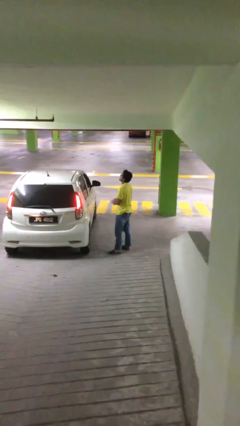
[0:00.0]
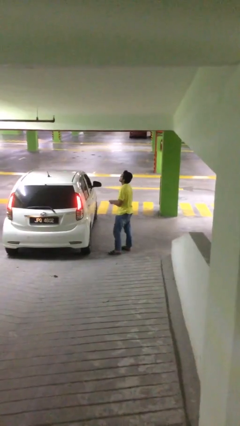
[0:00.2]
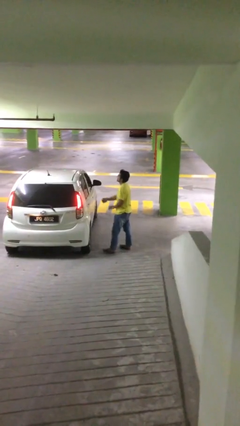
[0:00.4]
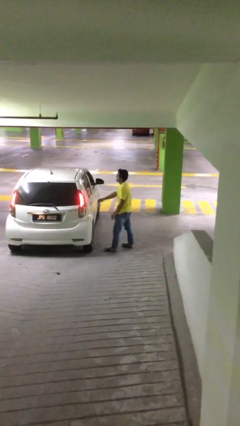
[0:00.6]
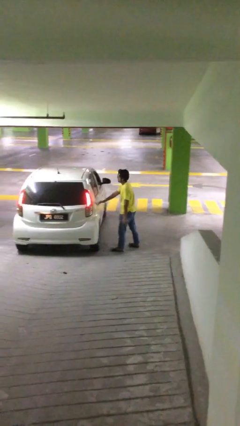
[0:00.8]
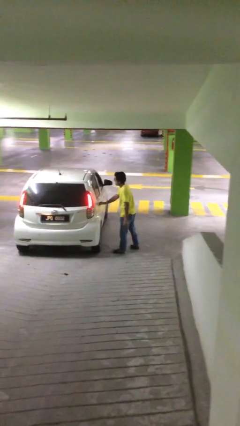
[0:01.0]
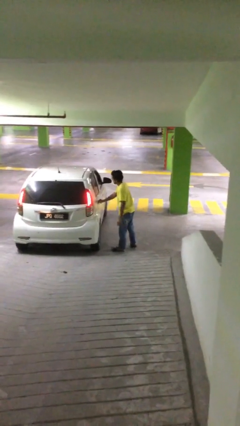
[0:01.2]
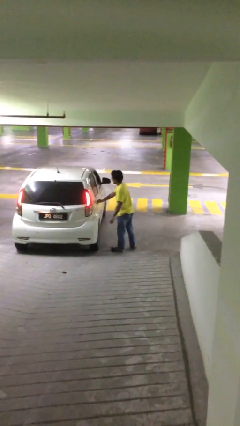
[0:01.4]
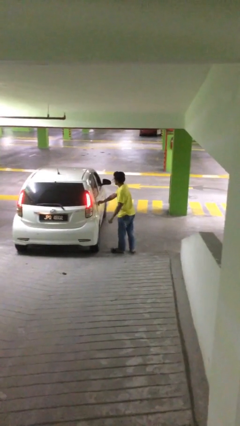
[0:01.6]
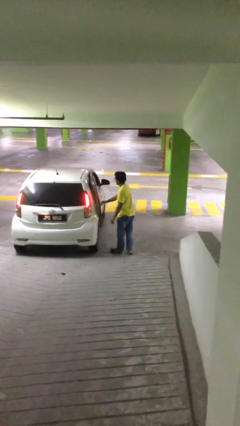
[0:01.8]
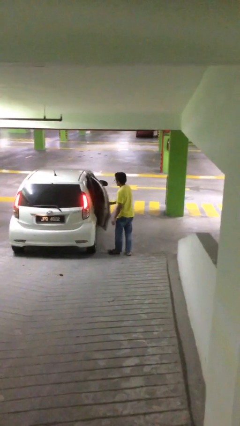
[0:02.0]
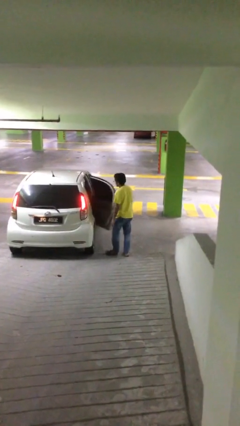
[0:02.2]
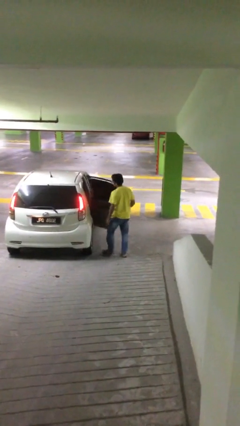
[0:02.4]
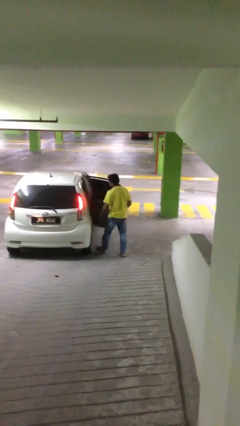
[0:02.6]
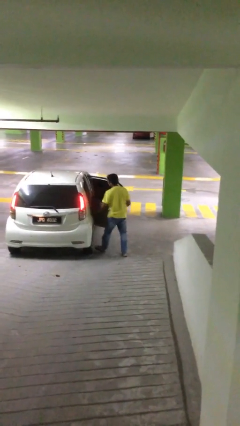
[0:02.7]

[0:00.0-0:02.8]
person opens car door

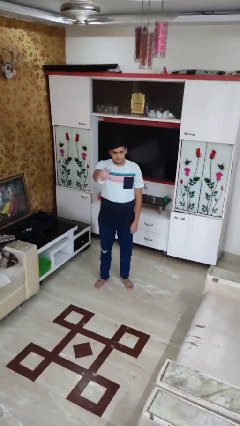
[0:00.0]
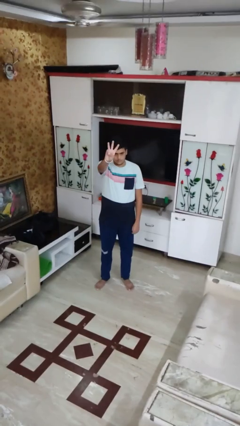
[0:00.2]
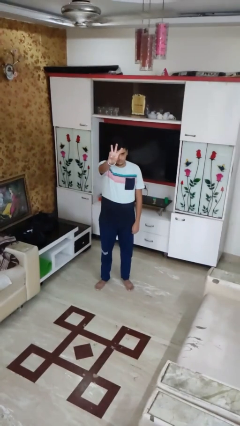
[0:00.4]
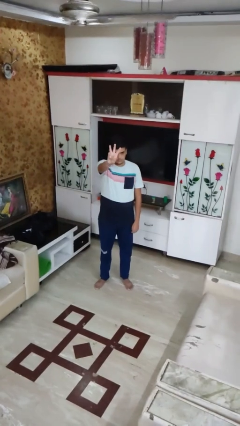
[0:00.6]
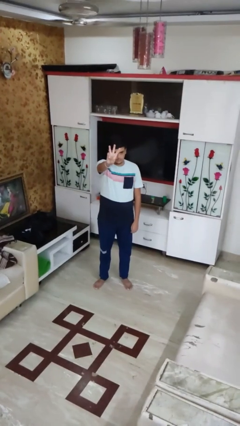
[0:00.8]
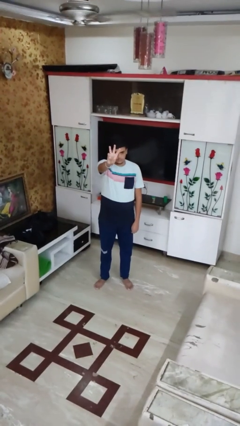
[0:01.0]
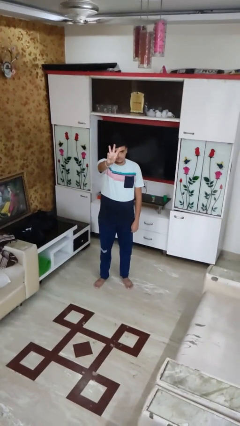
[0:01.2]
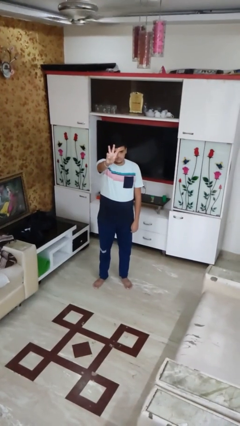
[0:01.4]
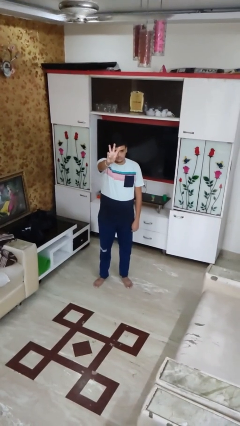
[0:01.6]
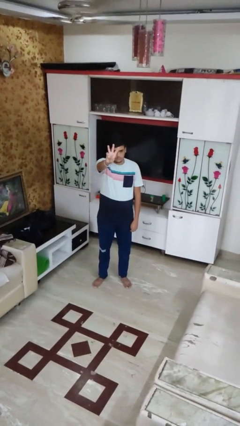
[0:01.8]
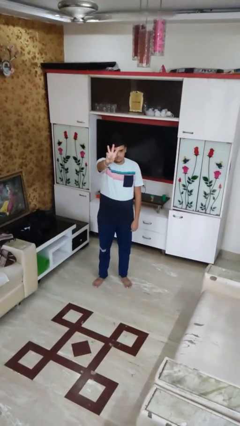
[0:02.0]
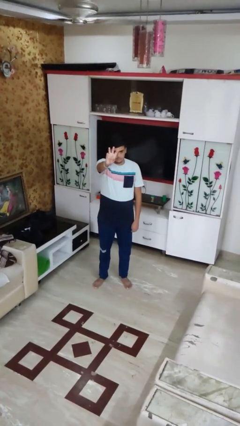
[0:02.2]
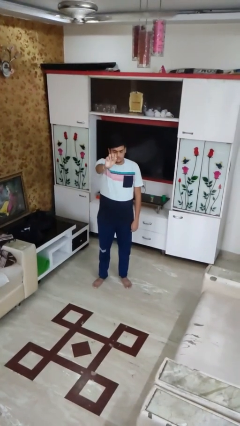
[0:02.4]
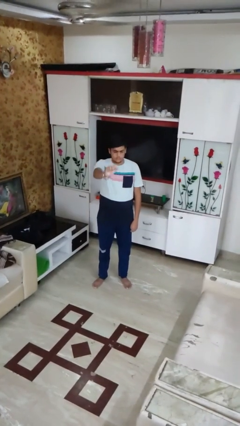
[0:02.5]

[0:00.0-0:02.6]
person gestures number three

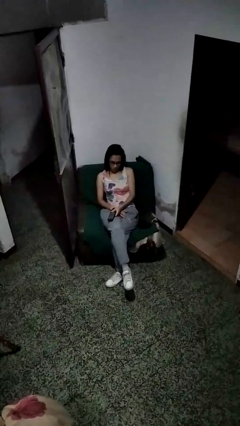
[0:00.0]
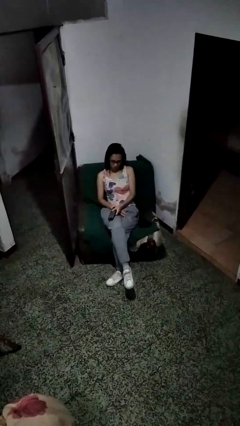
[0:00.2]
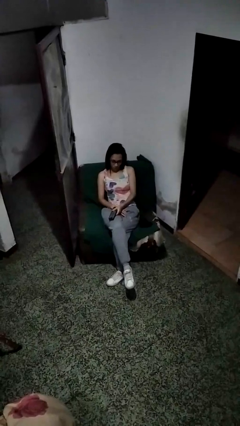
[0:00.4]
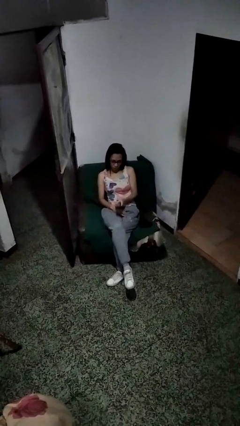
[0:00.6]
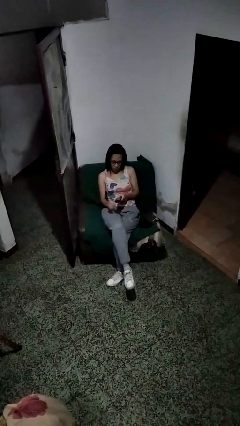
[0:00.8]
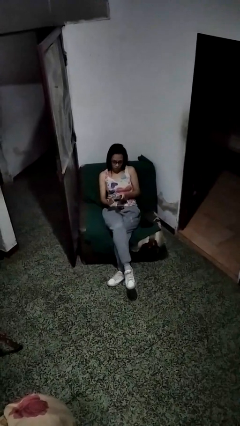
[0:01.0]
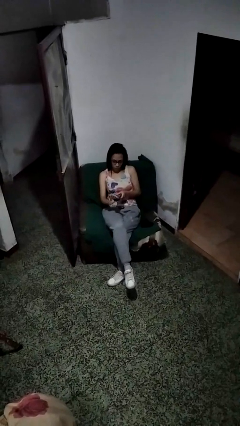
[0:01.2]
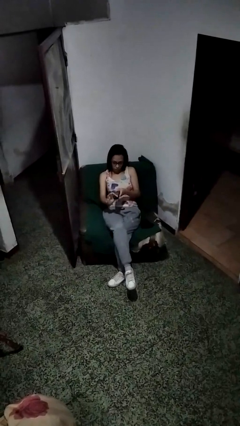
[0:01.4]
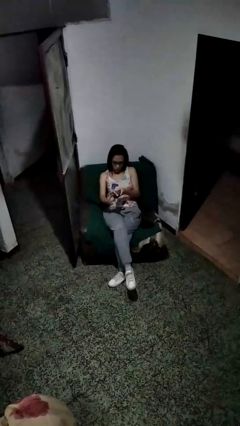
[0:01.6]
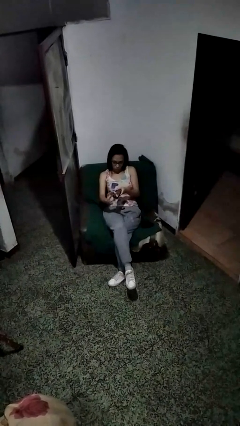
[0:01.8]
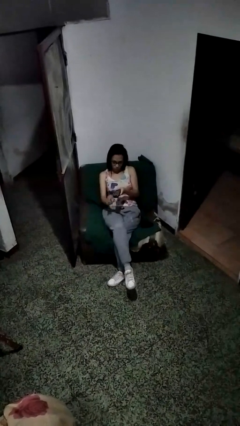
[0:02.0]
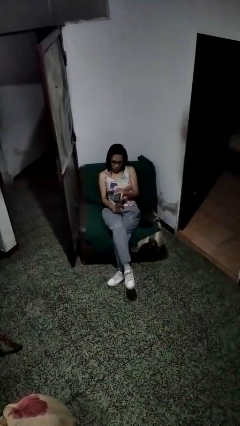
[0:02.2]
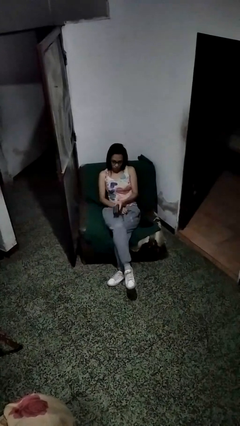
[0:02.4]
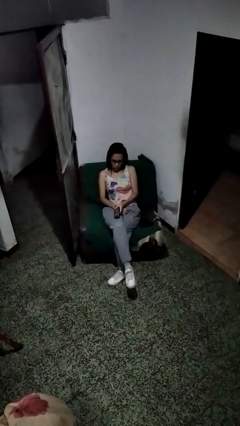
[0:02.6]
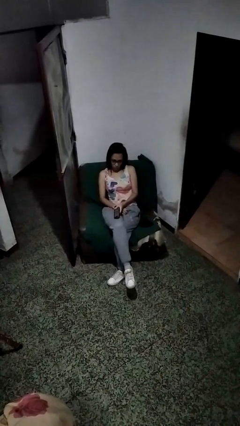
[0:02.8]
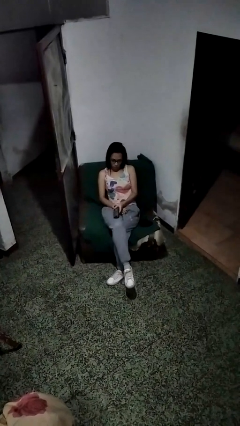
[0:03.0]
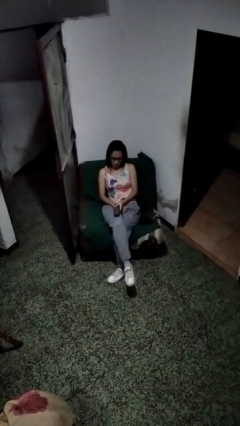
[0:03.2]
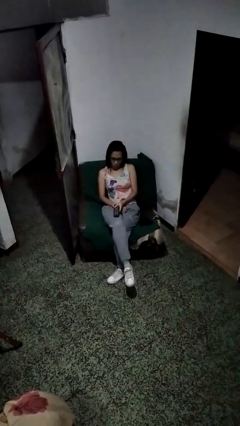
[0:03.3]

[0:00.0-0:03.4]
person uses television remote

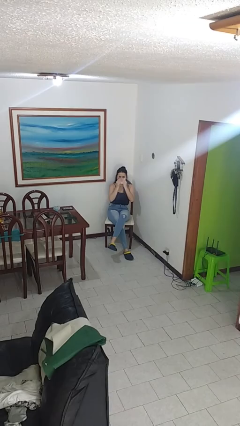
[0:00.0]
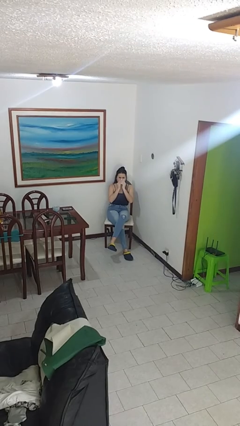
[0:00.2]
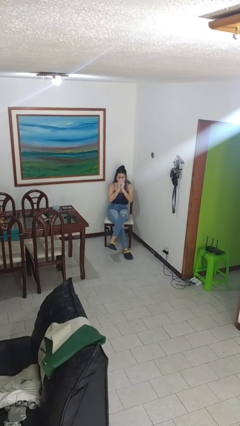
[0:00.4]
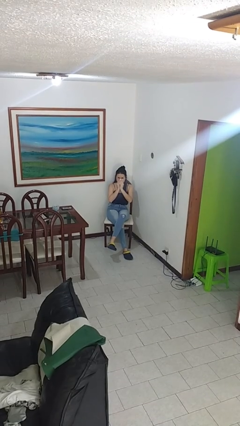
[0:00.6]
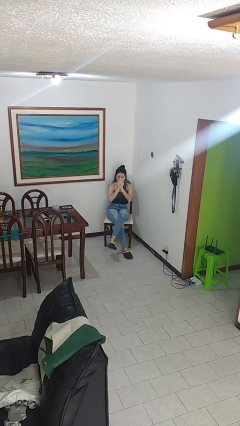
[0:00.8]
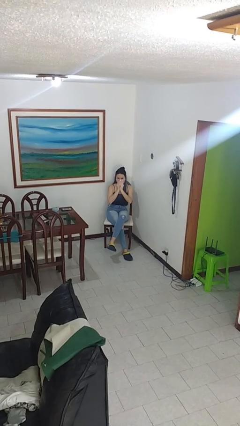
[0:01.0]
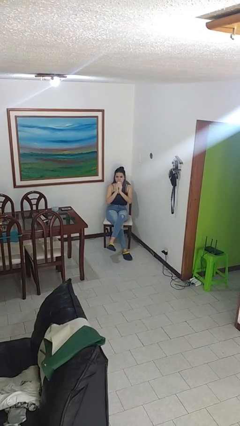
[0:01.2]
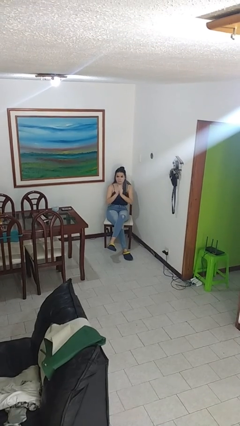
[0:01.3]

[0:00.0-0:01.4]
person blows nose

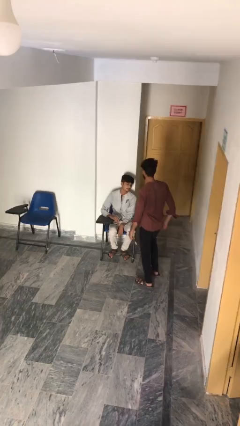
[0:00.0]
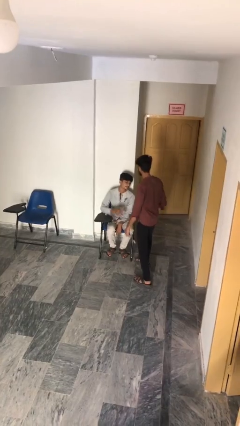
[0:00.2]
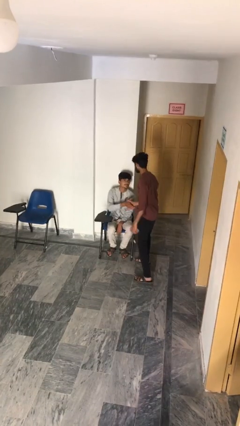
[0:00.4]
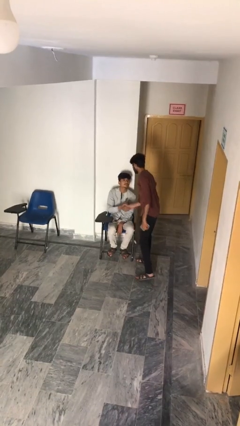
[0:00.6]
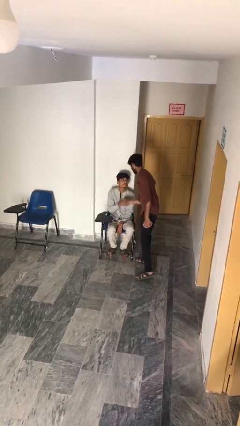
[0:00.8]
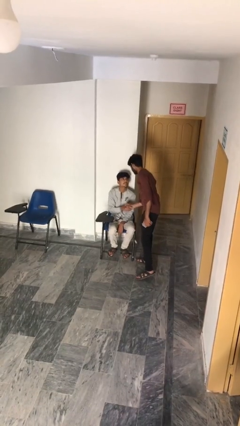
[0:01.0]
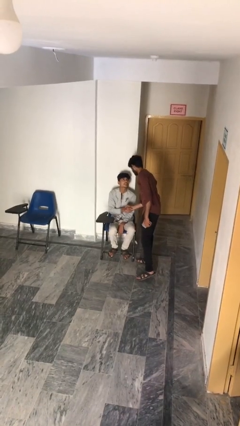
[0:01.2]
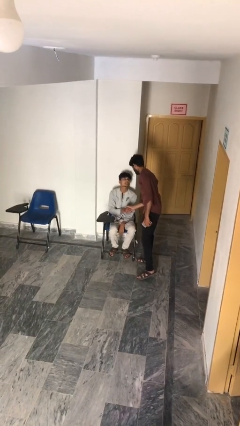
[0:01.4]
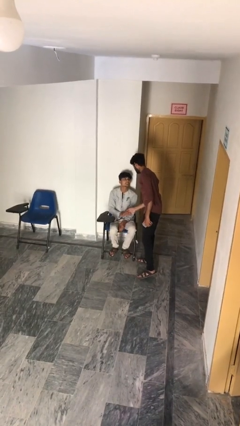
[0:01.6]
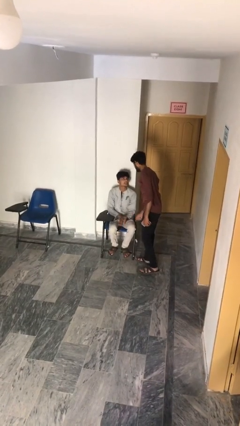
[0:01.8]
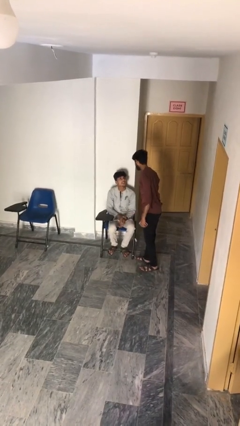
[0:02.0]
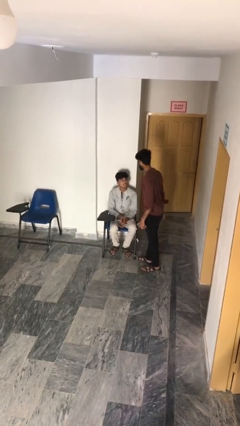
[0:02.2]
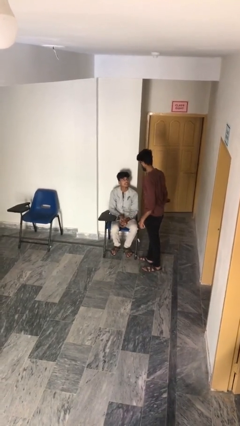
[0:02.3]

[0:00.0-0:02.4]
person shakes hand

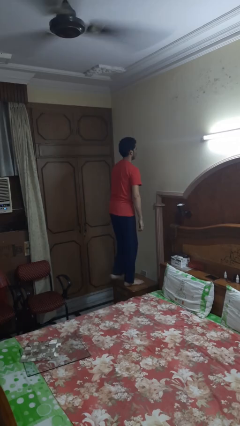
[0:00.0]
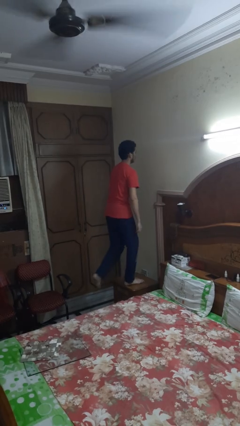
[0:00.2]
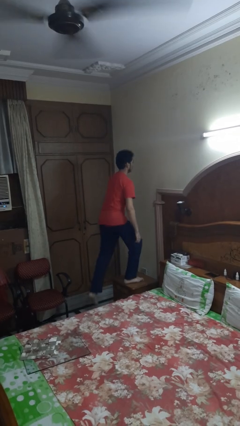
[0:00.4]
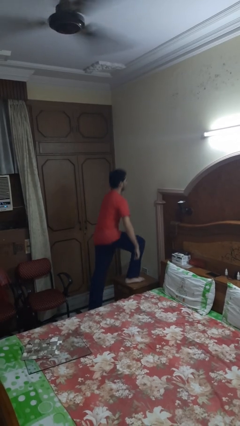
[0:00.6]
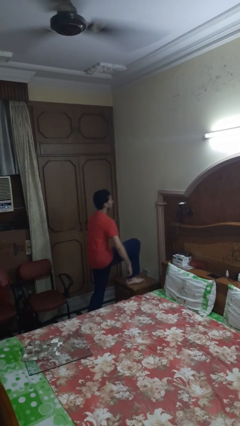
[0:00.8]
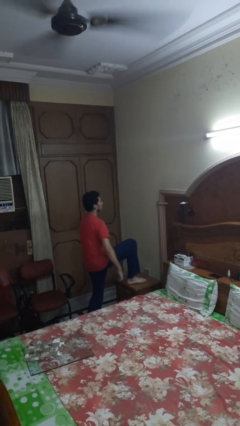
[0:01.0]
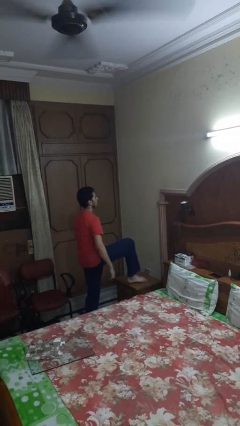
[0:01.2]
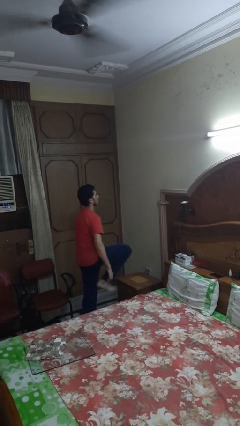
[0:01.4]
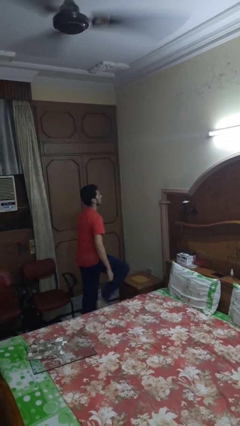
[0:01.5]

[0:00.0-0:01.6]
person climbs off table

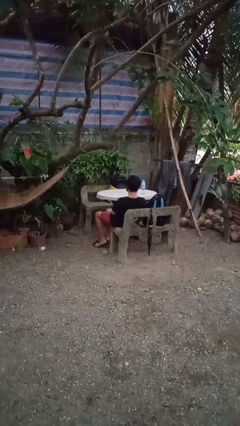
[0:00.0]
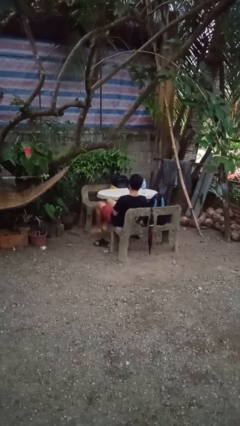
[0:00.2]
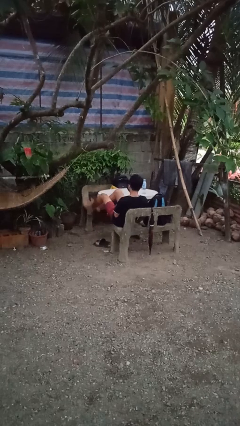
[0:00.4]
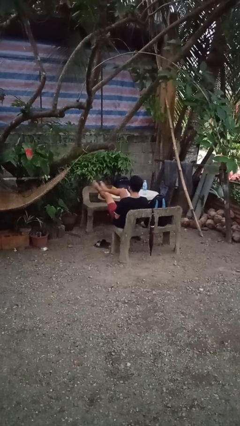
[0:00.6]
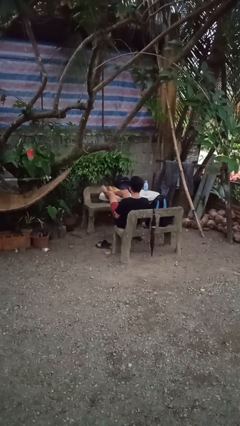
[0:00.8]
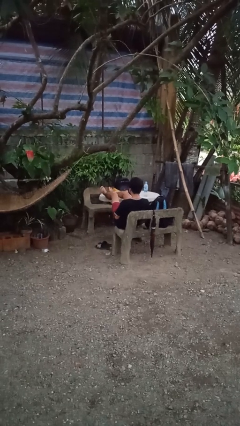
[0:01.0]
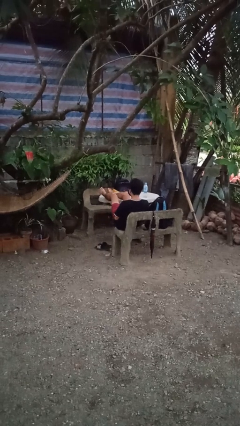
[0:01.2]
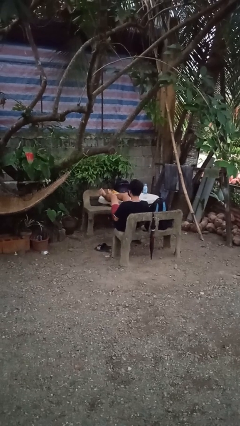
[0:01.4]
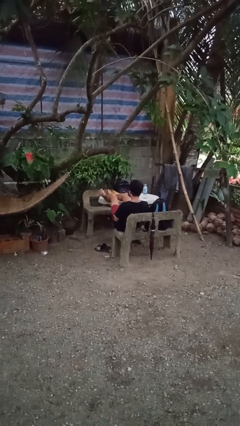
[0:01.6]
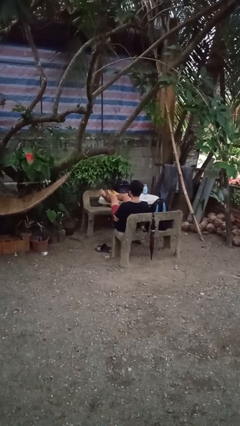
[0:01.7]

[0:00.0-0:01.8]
person puts feet up

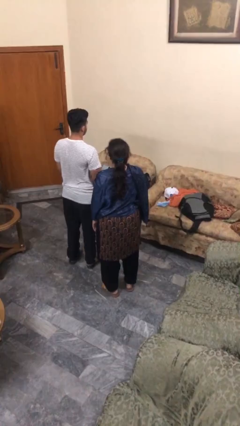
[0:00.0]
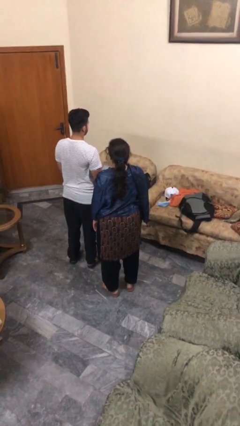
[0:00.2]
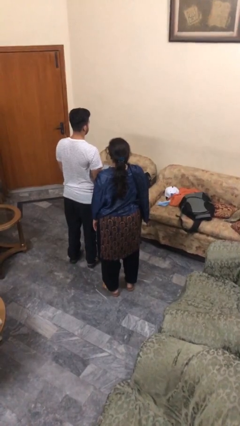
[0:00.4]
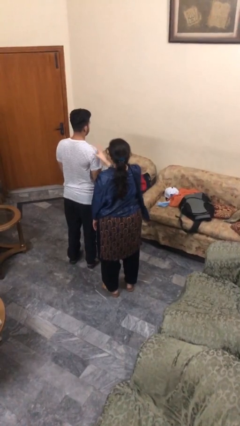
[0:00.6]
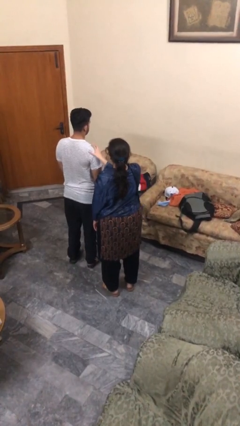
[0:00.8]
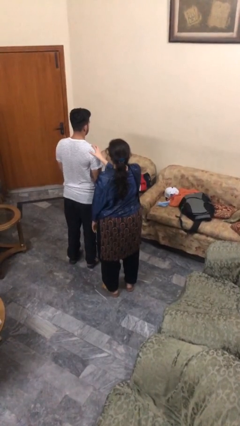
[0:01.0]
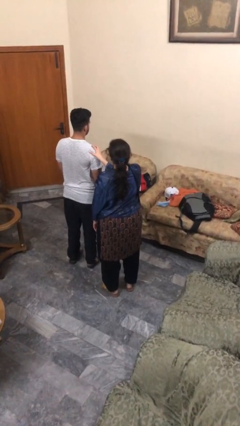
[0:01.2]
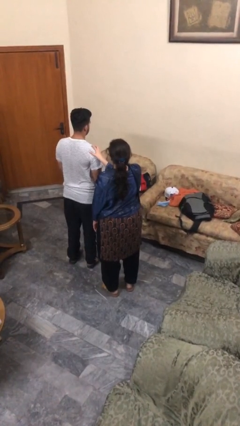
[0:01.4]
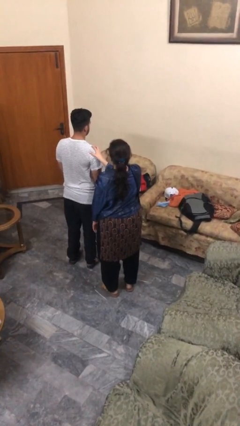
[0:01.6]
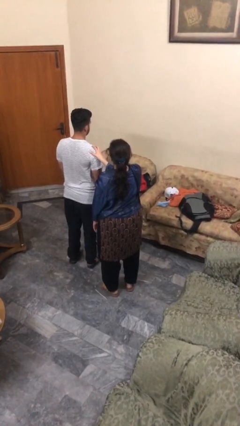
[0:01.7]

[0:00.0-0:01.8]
person grabs person by shoulder
